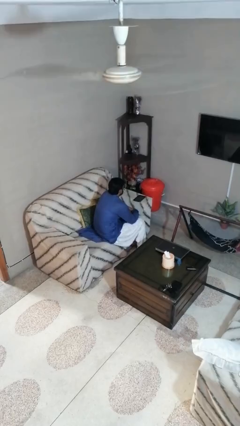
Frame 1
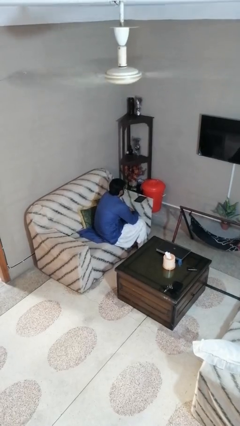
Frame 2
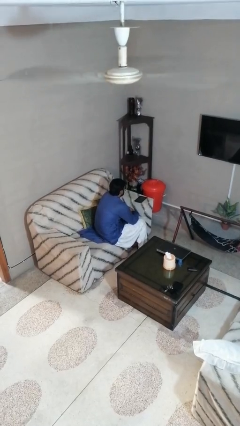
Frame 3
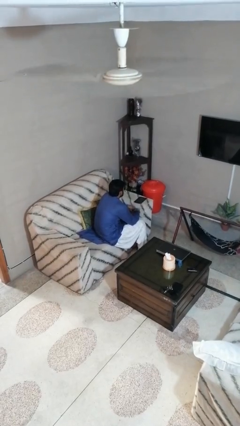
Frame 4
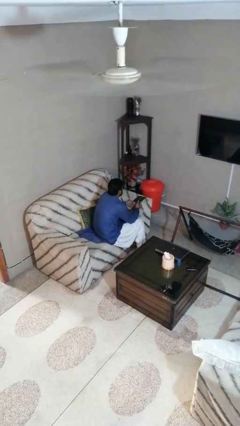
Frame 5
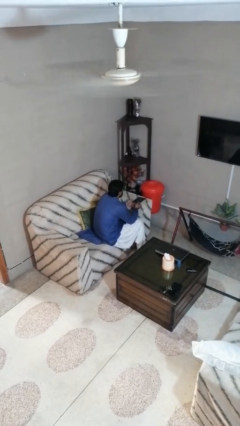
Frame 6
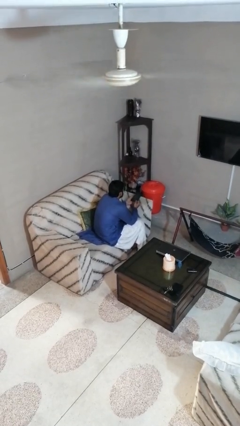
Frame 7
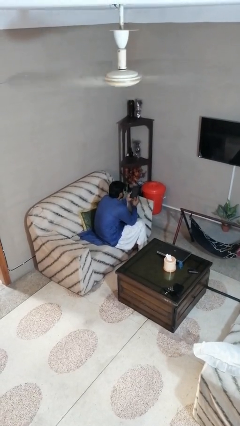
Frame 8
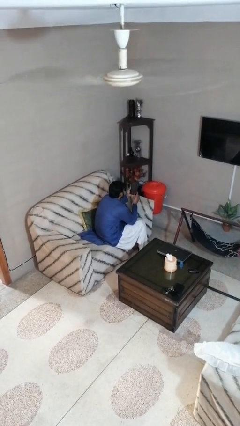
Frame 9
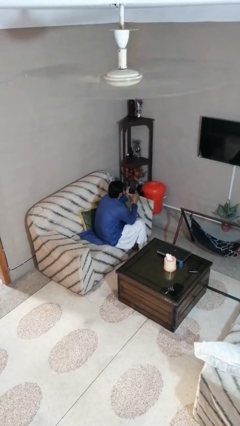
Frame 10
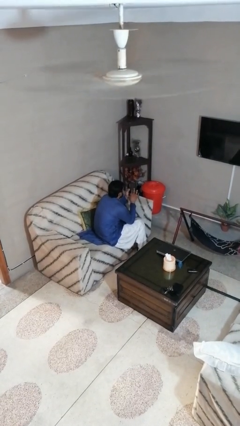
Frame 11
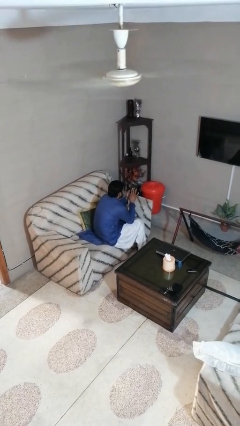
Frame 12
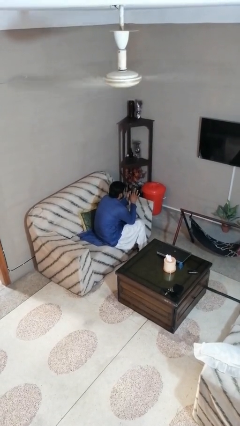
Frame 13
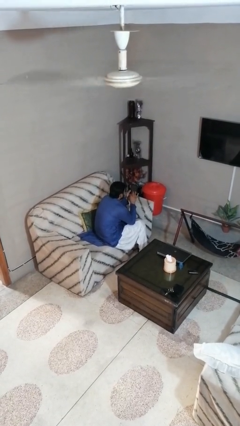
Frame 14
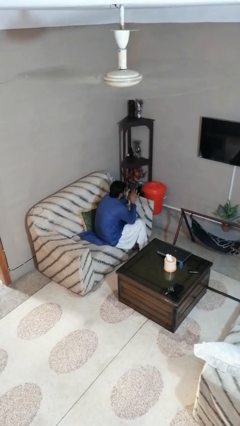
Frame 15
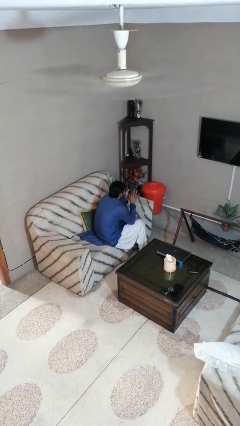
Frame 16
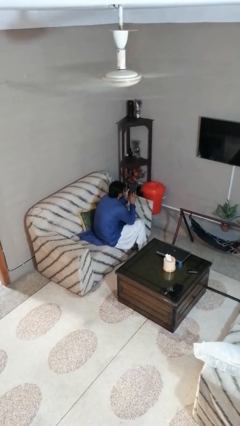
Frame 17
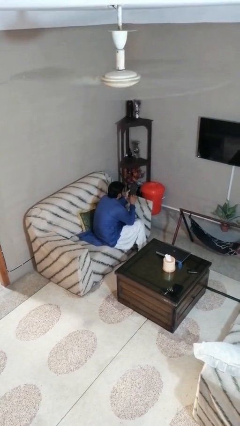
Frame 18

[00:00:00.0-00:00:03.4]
person interacts with tablet

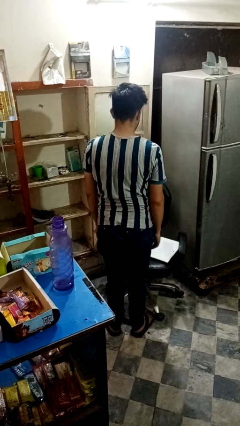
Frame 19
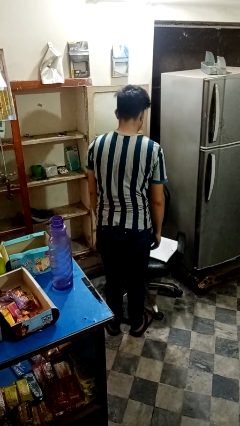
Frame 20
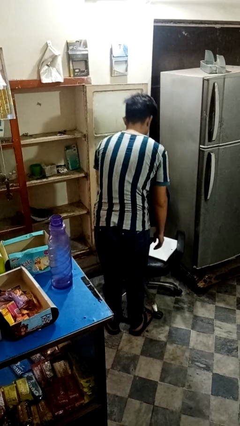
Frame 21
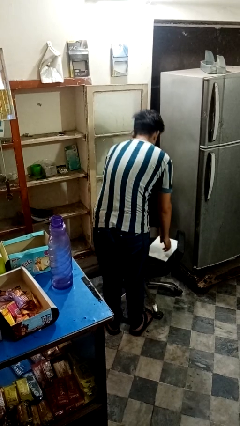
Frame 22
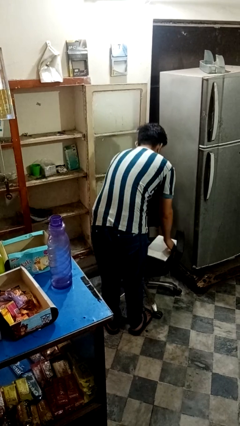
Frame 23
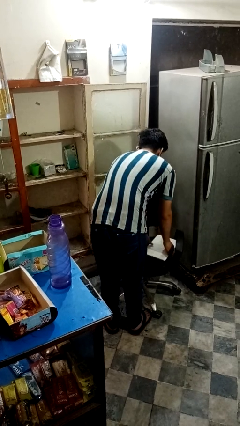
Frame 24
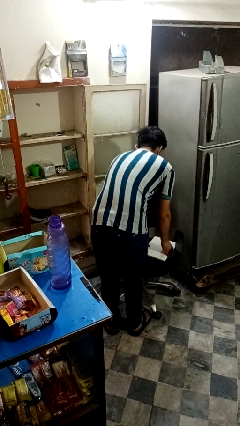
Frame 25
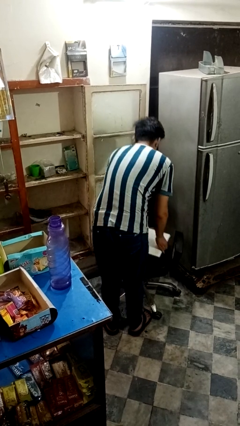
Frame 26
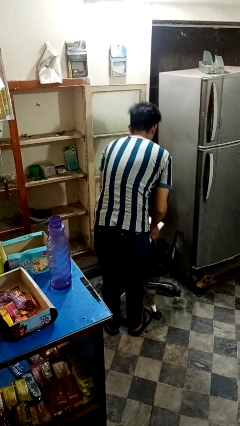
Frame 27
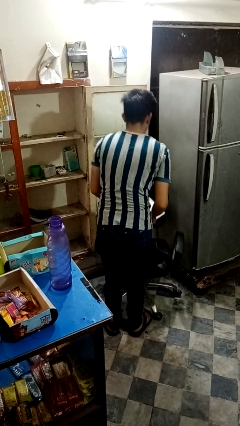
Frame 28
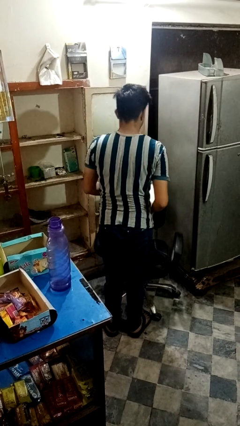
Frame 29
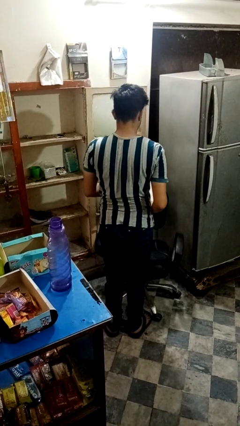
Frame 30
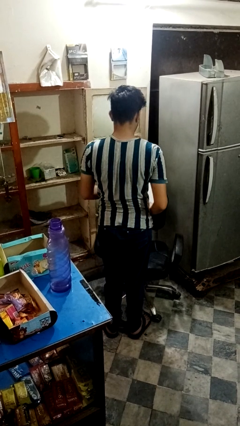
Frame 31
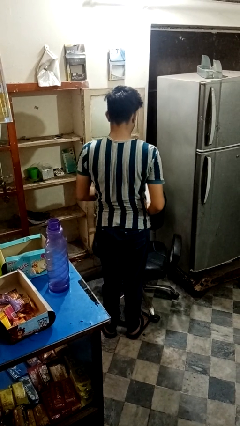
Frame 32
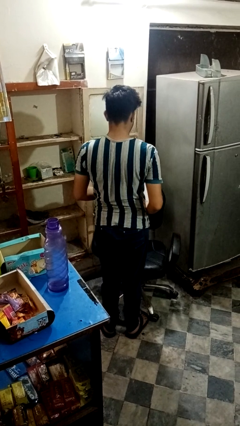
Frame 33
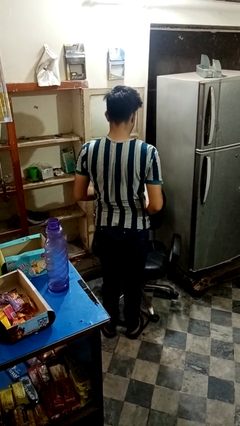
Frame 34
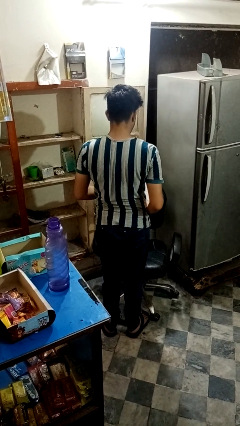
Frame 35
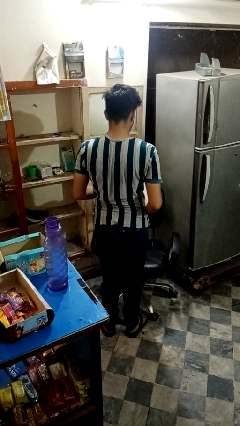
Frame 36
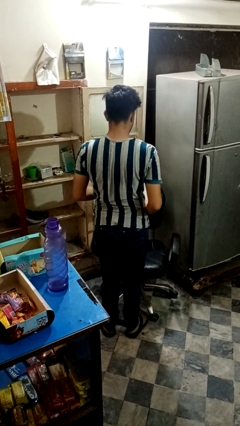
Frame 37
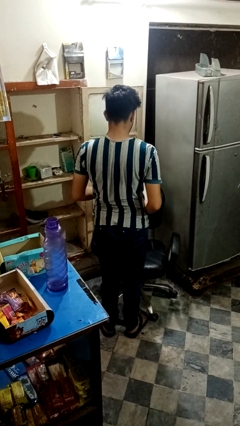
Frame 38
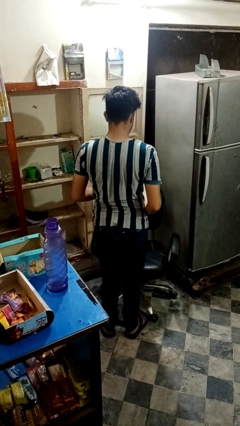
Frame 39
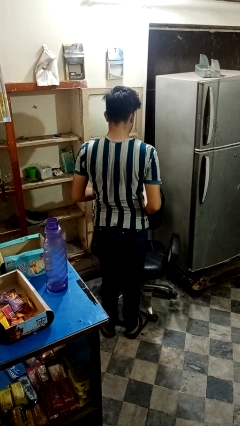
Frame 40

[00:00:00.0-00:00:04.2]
person picks up object from couch

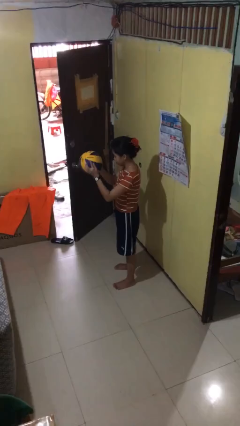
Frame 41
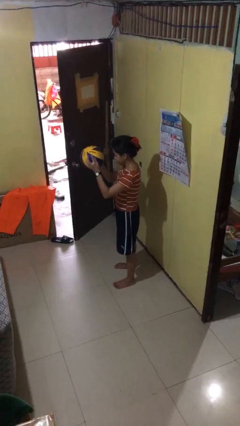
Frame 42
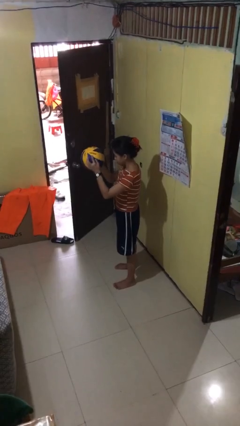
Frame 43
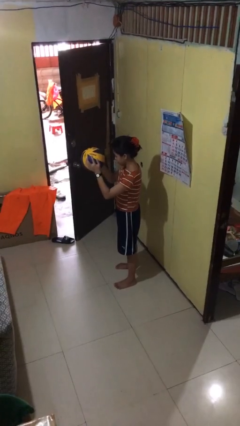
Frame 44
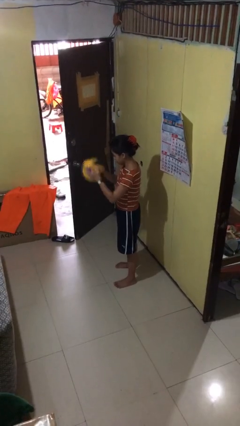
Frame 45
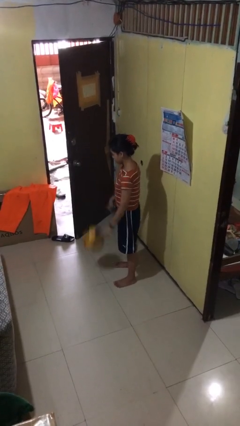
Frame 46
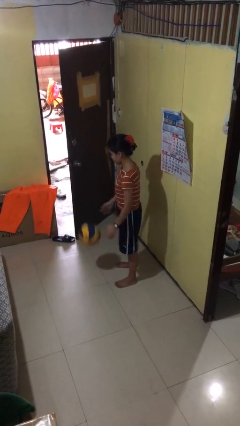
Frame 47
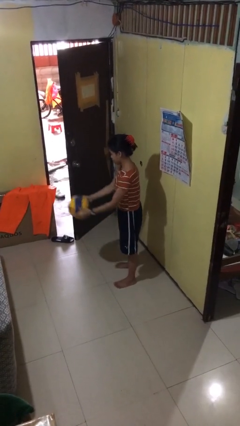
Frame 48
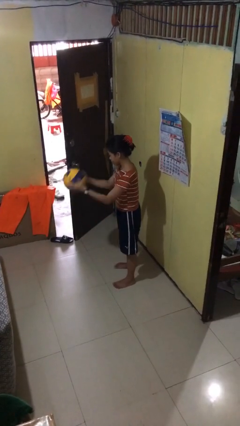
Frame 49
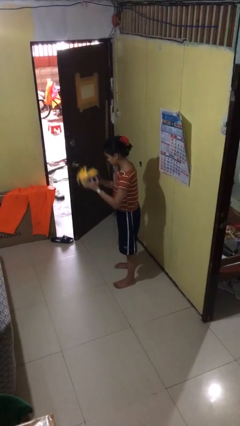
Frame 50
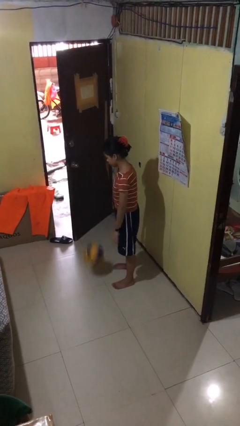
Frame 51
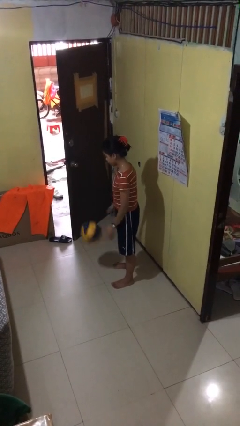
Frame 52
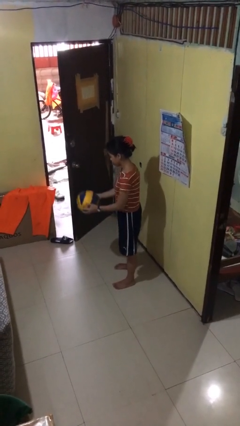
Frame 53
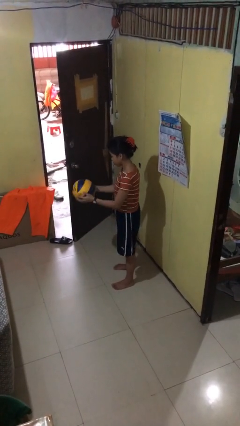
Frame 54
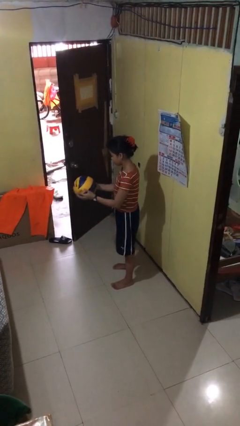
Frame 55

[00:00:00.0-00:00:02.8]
person bounces ball on floor

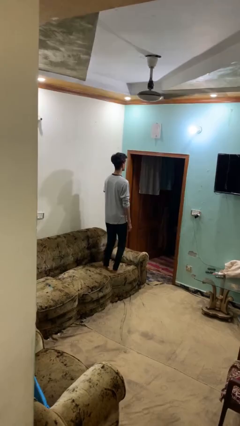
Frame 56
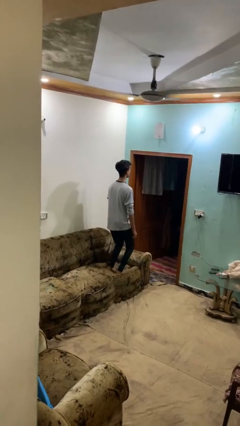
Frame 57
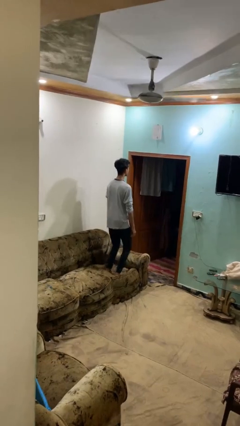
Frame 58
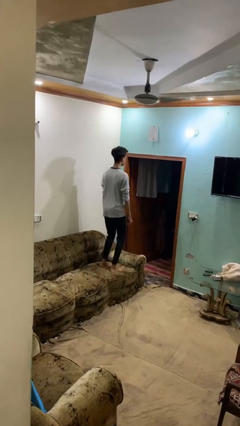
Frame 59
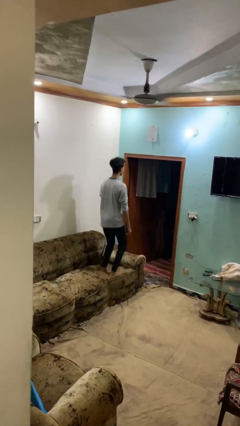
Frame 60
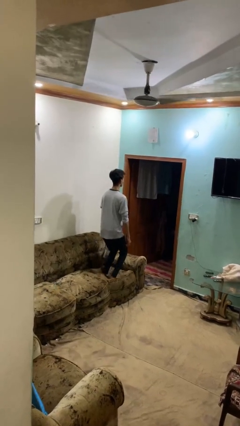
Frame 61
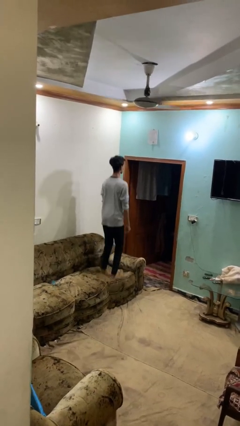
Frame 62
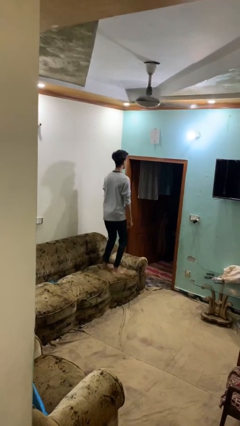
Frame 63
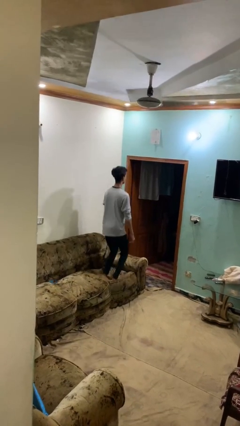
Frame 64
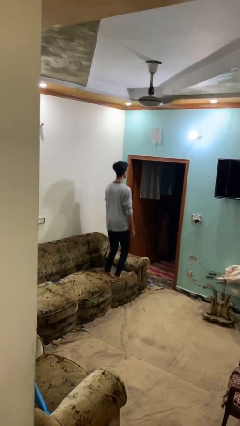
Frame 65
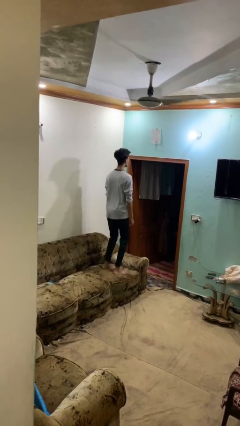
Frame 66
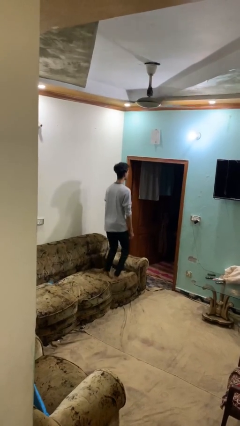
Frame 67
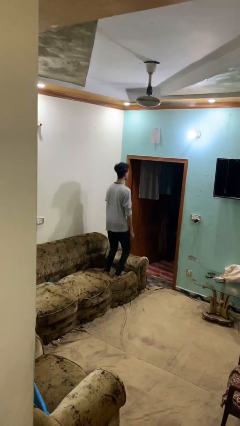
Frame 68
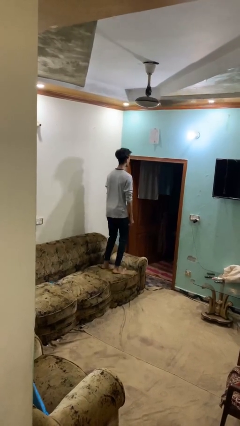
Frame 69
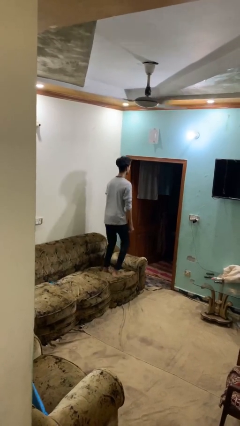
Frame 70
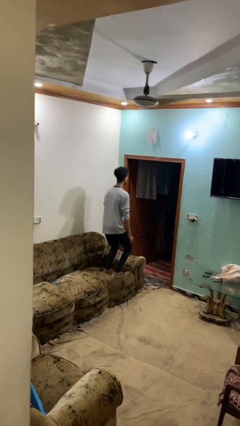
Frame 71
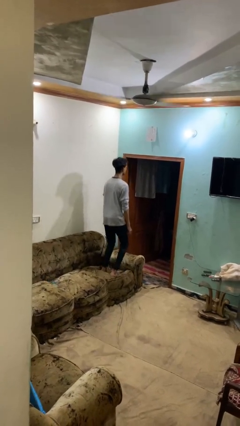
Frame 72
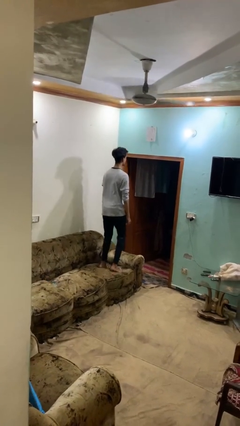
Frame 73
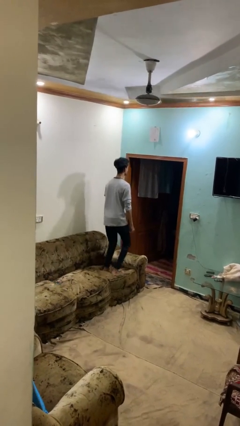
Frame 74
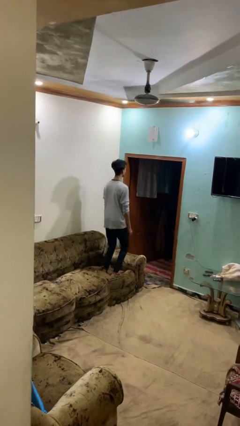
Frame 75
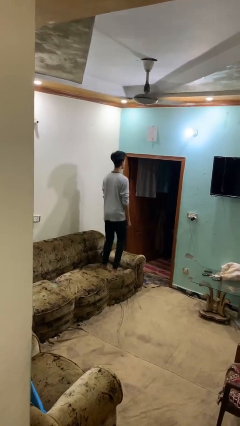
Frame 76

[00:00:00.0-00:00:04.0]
person jumps on couch

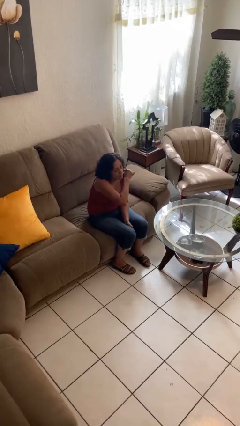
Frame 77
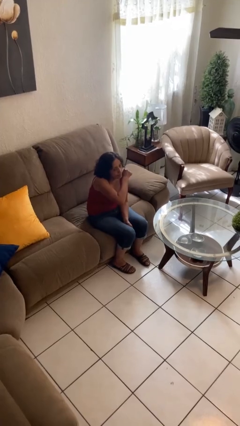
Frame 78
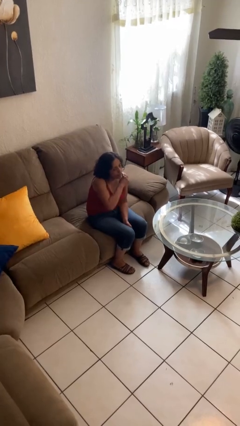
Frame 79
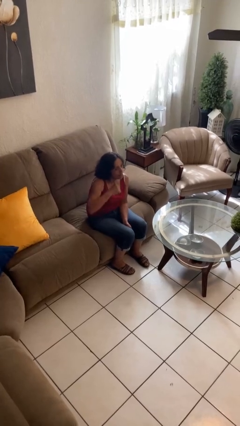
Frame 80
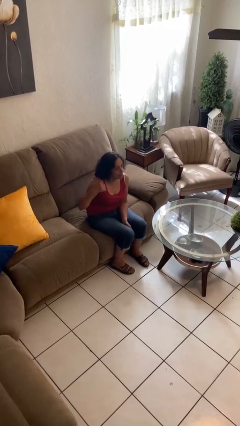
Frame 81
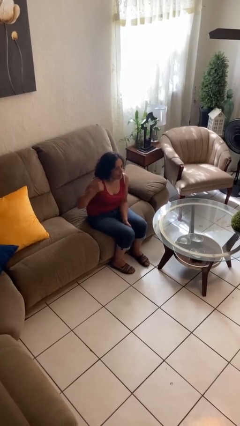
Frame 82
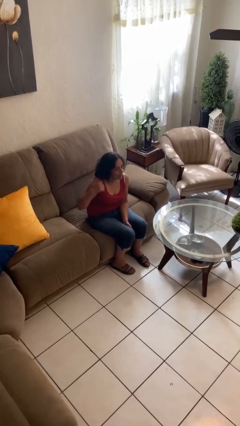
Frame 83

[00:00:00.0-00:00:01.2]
person gestures cut

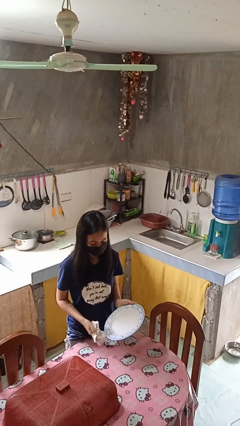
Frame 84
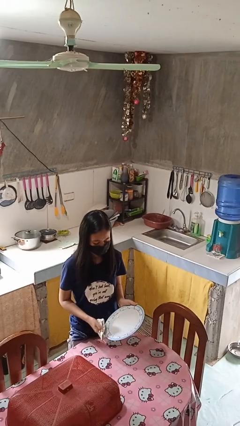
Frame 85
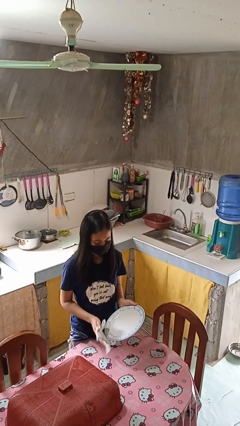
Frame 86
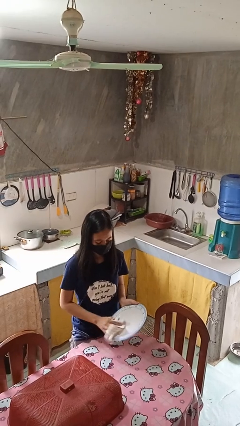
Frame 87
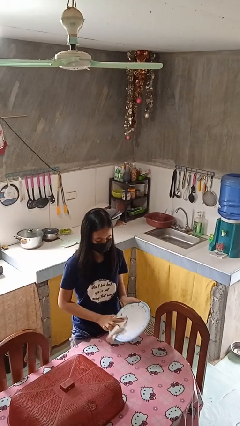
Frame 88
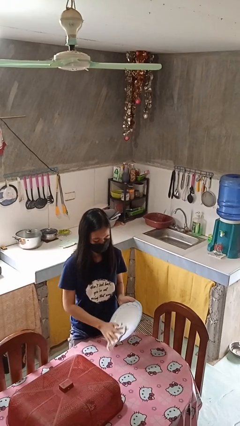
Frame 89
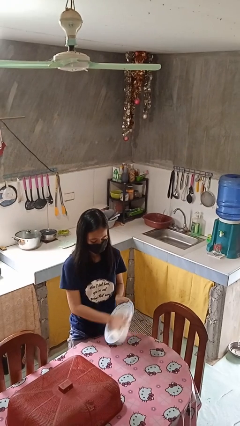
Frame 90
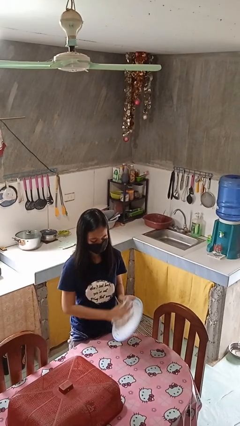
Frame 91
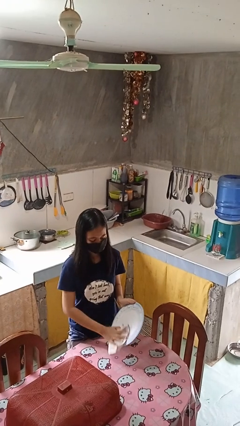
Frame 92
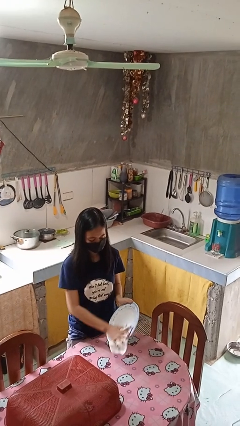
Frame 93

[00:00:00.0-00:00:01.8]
person dries dish
